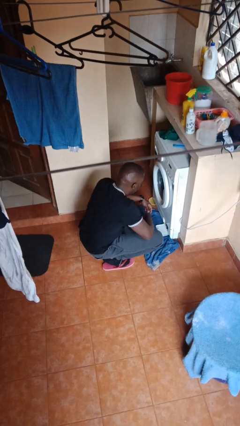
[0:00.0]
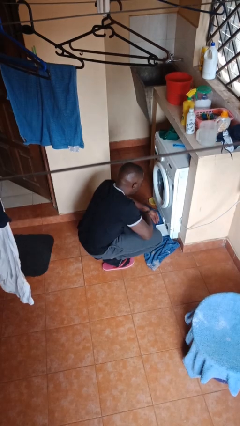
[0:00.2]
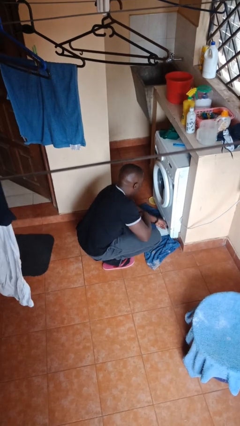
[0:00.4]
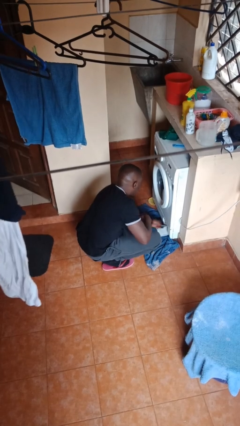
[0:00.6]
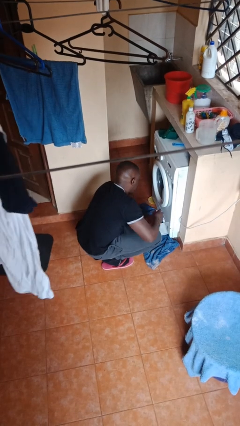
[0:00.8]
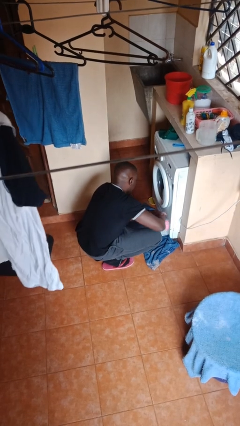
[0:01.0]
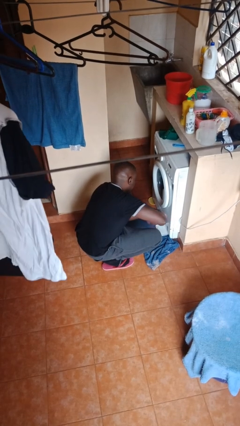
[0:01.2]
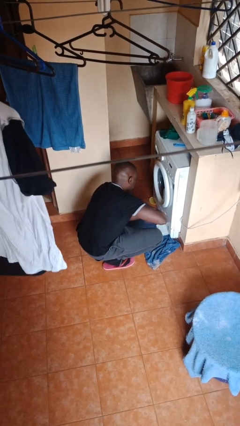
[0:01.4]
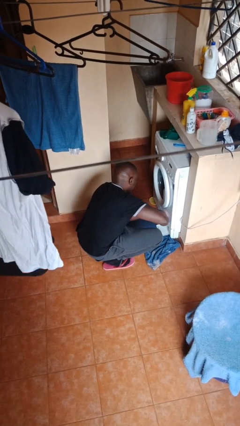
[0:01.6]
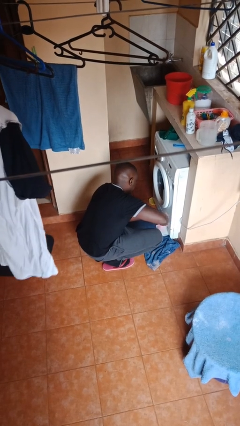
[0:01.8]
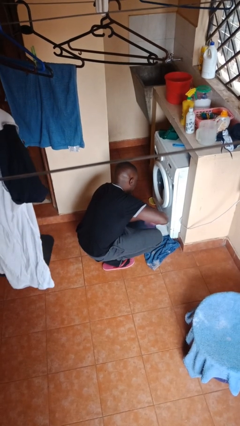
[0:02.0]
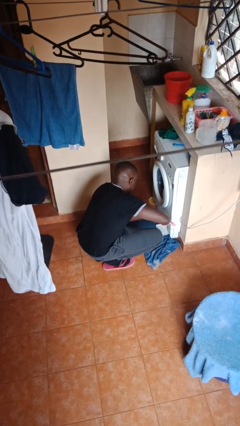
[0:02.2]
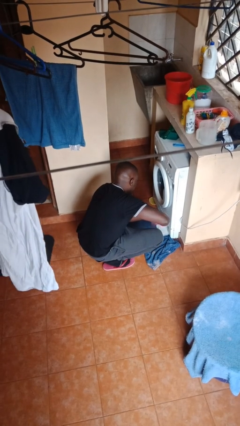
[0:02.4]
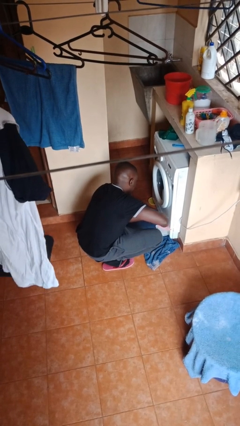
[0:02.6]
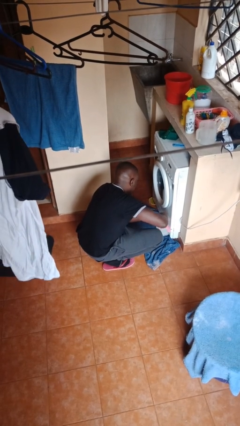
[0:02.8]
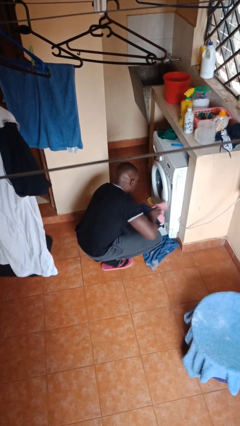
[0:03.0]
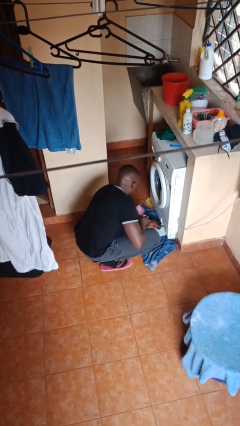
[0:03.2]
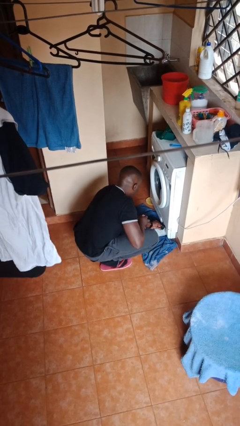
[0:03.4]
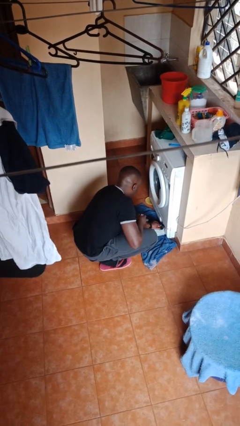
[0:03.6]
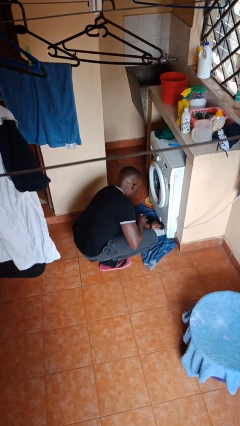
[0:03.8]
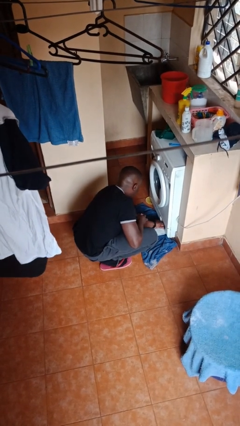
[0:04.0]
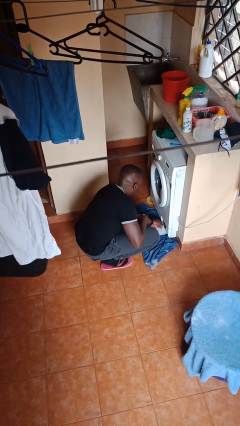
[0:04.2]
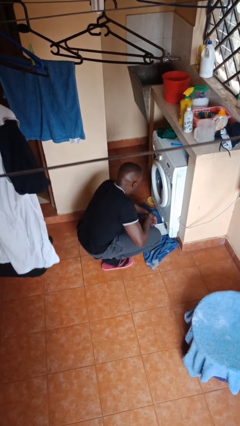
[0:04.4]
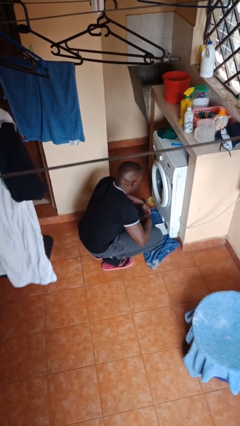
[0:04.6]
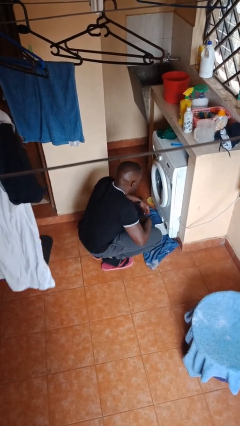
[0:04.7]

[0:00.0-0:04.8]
person cleans dryer lint trap

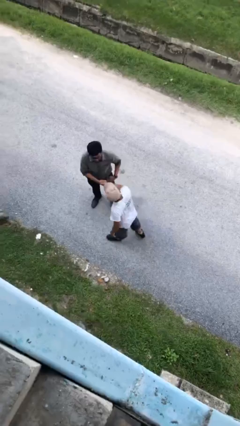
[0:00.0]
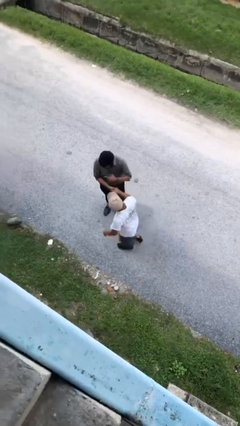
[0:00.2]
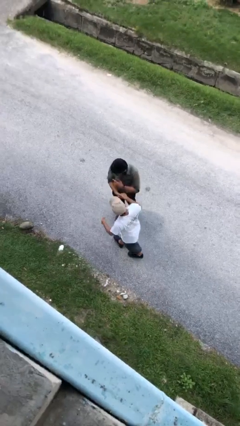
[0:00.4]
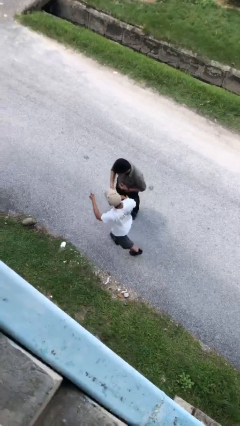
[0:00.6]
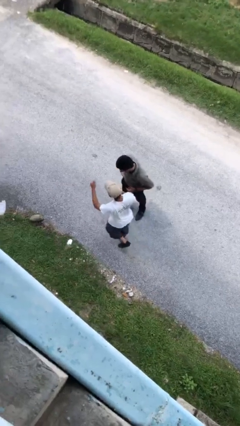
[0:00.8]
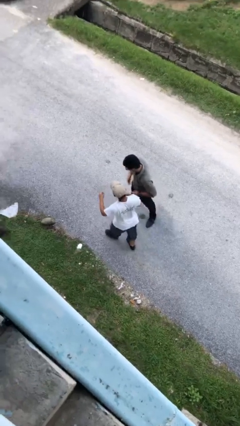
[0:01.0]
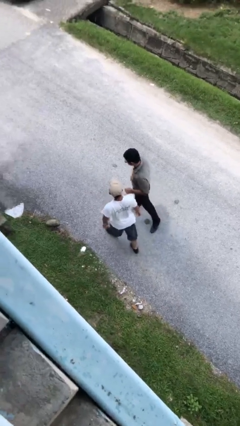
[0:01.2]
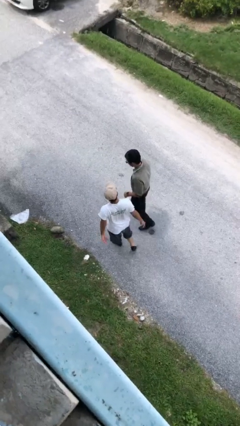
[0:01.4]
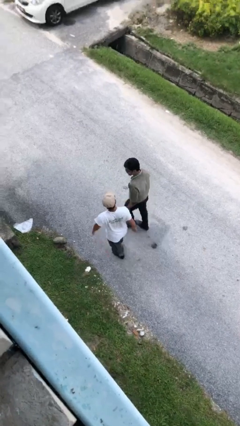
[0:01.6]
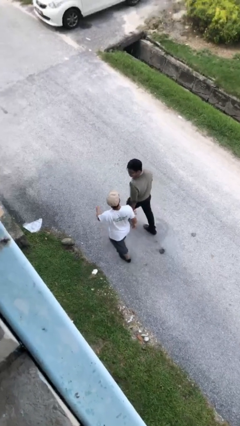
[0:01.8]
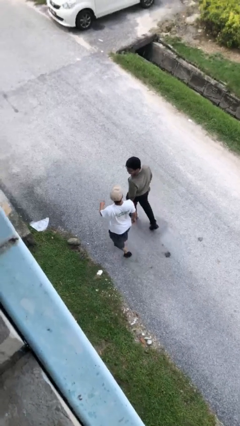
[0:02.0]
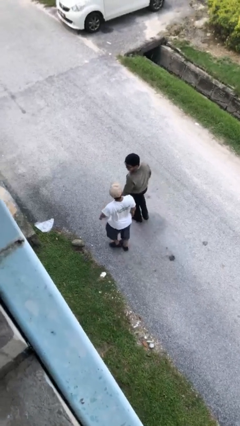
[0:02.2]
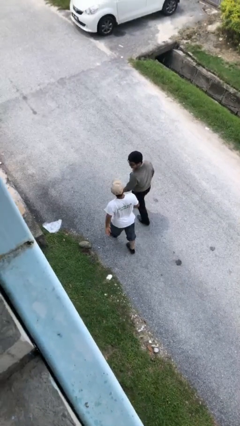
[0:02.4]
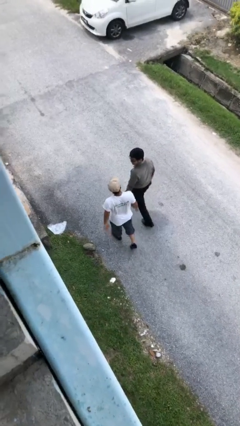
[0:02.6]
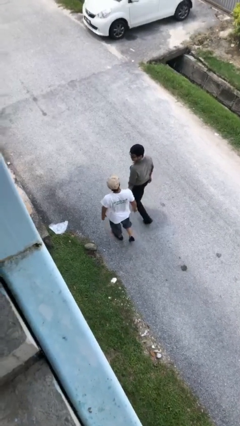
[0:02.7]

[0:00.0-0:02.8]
person talks to person

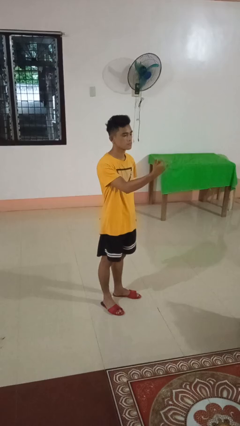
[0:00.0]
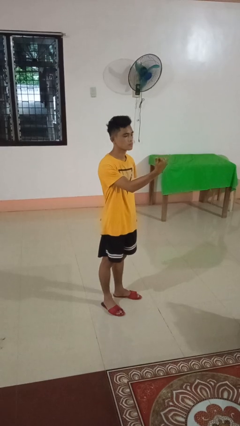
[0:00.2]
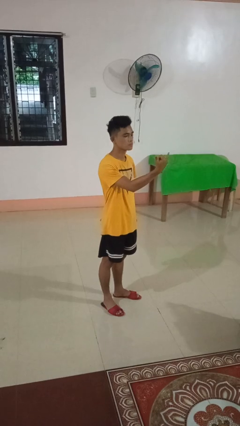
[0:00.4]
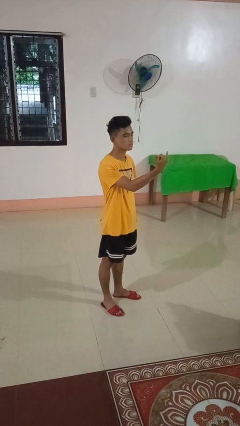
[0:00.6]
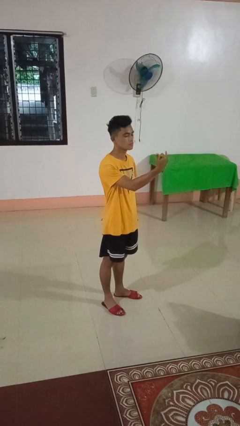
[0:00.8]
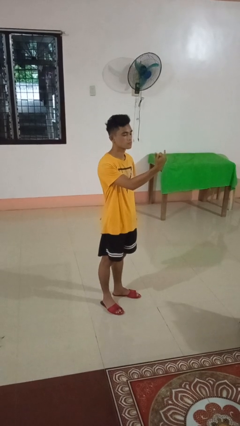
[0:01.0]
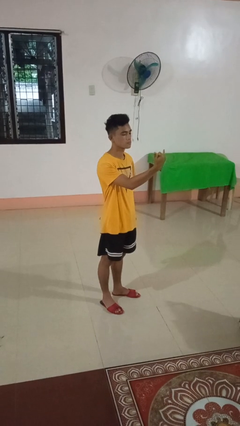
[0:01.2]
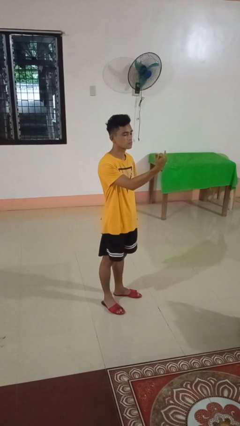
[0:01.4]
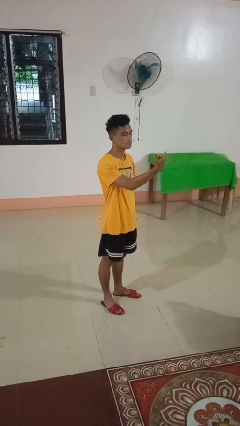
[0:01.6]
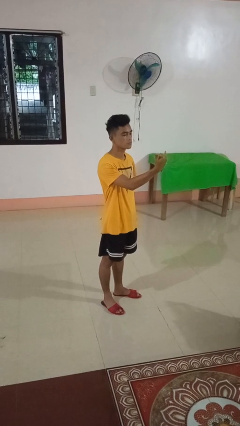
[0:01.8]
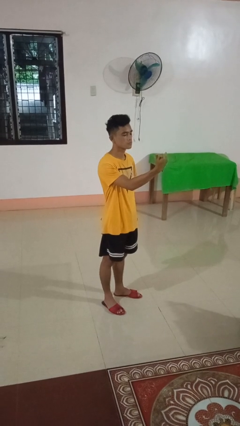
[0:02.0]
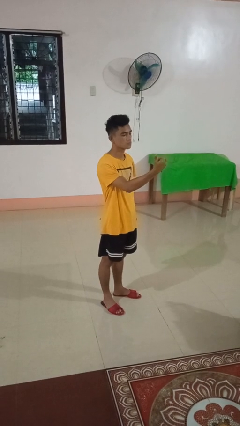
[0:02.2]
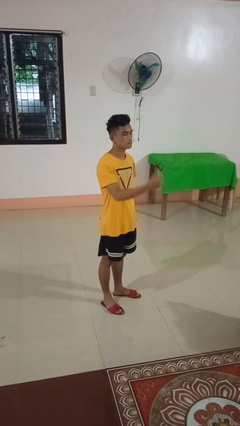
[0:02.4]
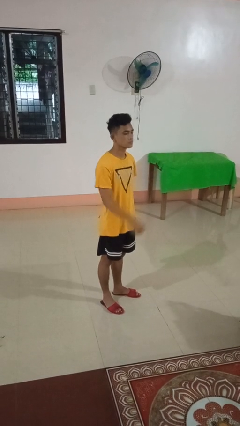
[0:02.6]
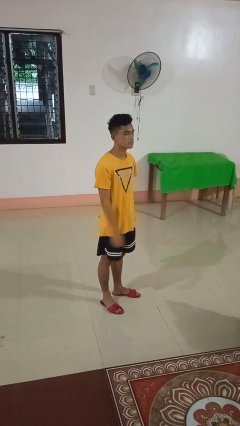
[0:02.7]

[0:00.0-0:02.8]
person gestures hang loose

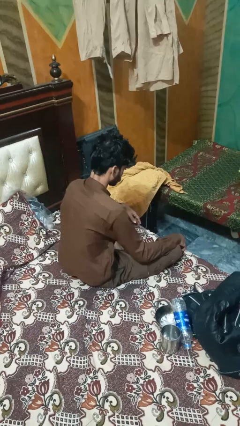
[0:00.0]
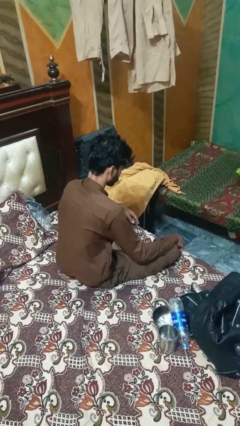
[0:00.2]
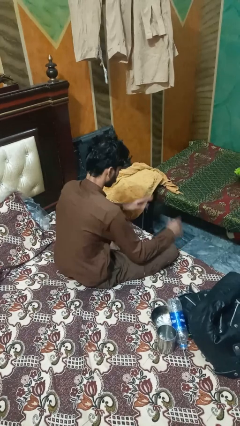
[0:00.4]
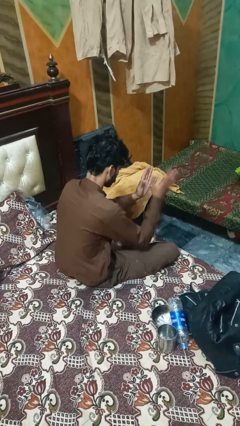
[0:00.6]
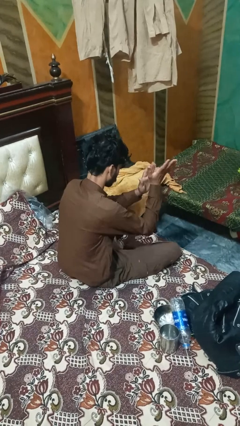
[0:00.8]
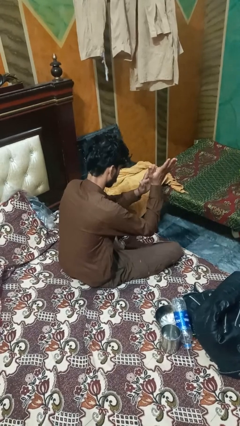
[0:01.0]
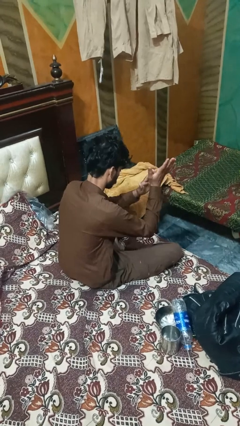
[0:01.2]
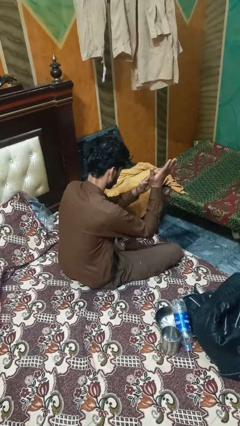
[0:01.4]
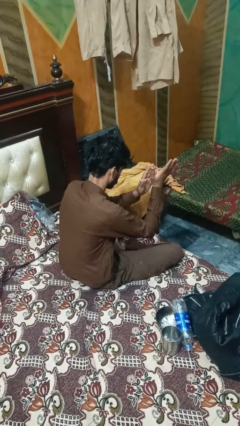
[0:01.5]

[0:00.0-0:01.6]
person claps hands

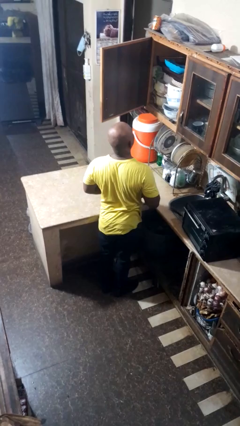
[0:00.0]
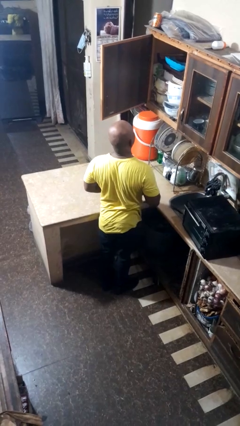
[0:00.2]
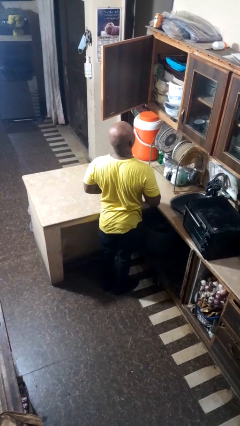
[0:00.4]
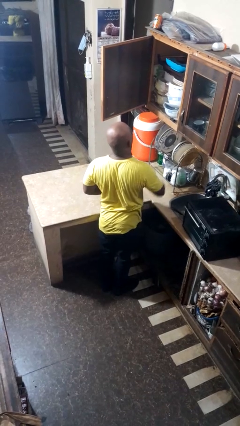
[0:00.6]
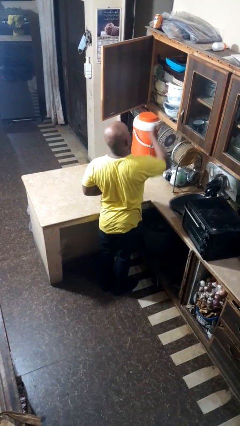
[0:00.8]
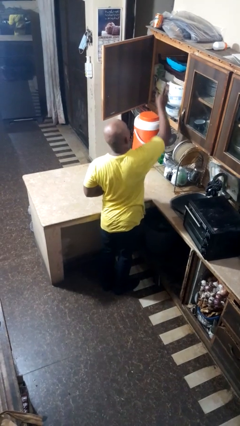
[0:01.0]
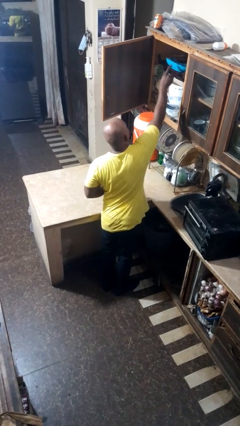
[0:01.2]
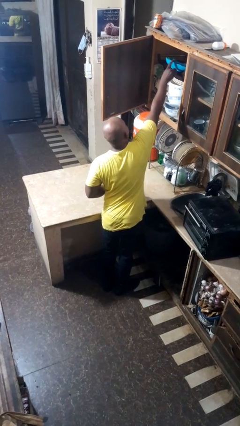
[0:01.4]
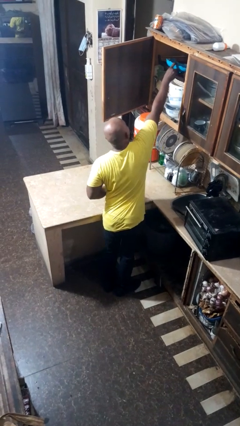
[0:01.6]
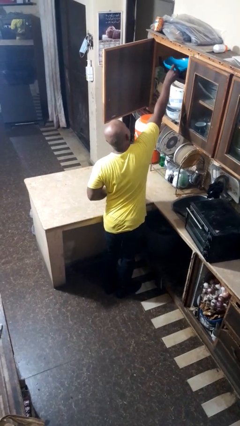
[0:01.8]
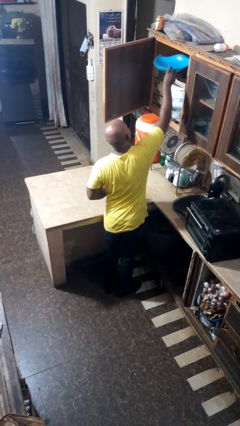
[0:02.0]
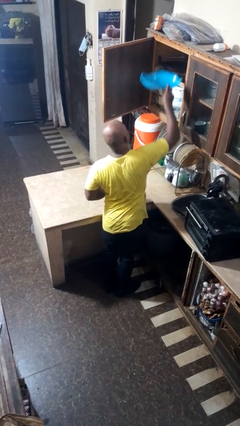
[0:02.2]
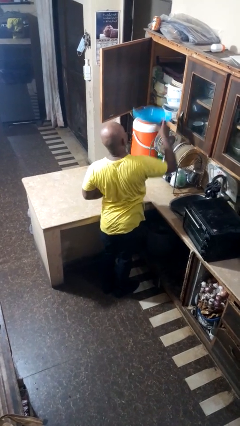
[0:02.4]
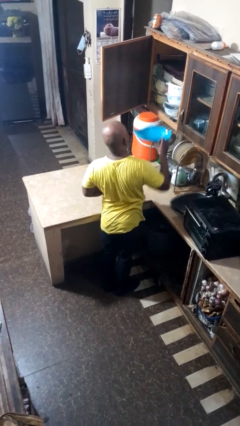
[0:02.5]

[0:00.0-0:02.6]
person takes object from cabinet

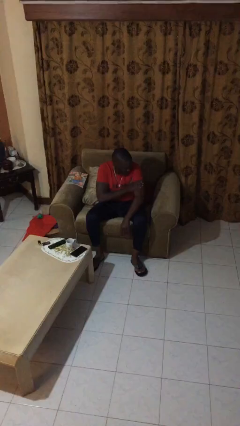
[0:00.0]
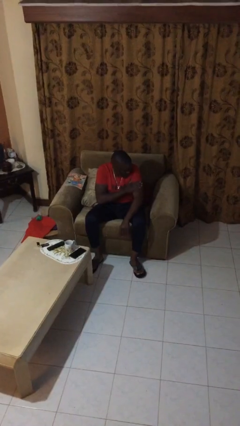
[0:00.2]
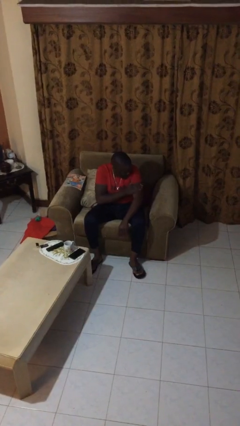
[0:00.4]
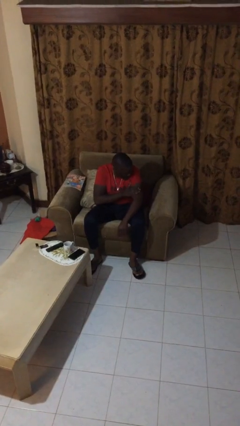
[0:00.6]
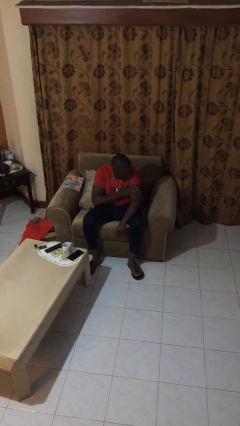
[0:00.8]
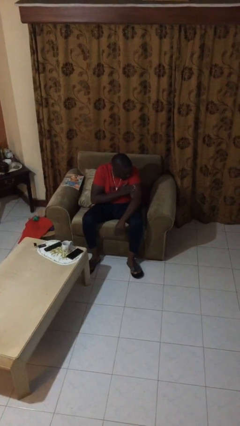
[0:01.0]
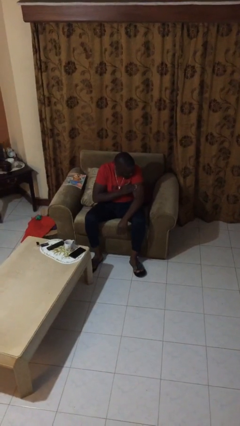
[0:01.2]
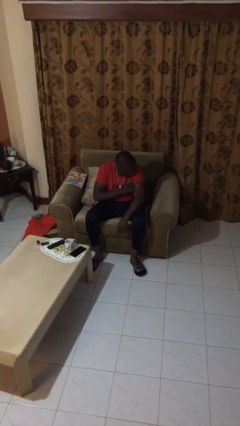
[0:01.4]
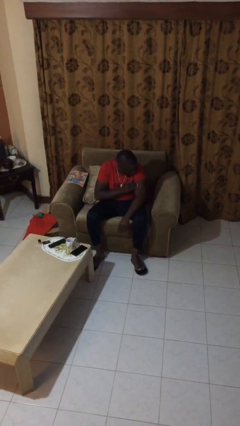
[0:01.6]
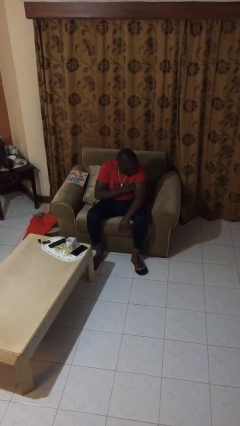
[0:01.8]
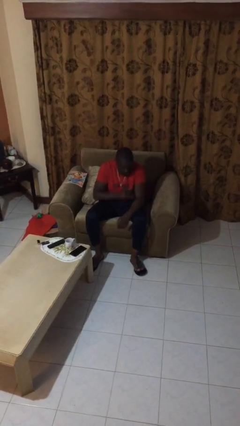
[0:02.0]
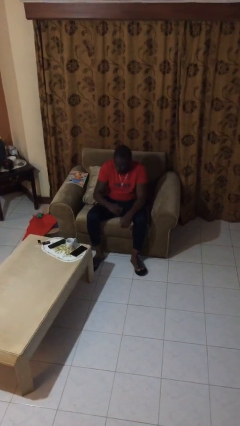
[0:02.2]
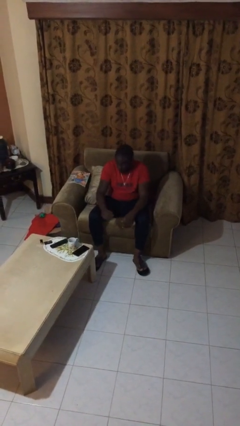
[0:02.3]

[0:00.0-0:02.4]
person swats bug
